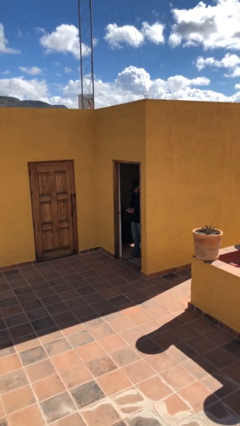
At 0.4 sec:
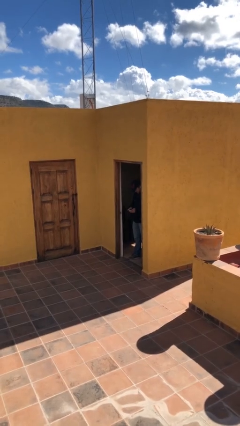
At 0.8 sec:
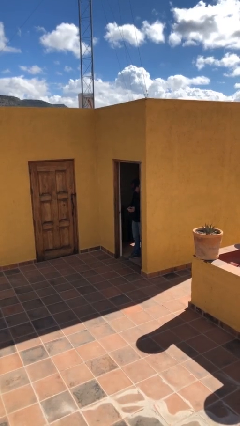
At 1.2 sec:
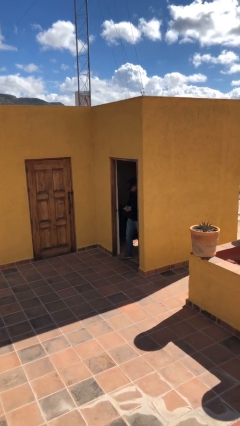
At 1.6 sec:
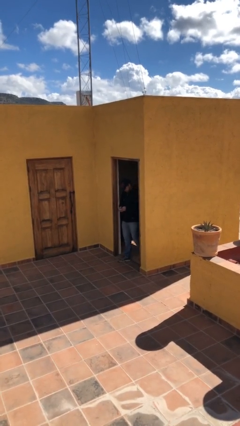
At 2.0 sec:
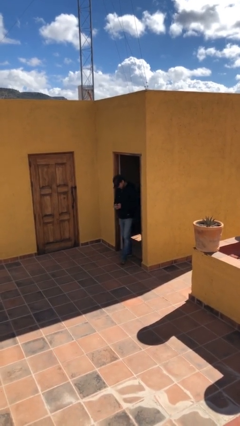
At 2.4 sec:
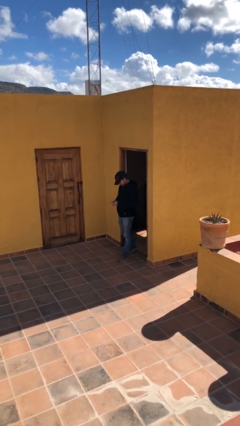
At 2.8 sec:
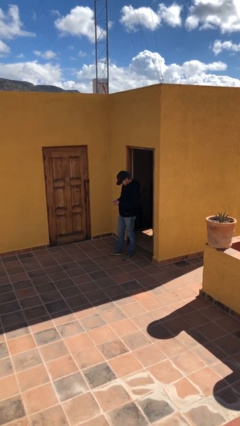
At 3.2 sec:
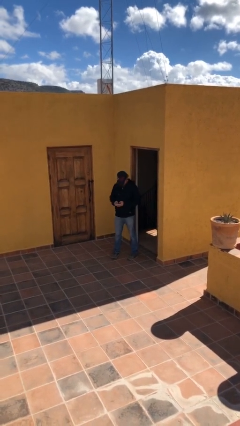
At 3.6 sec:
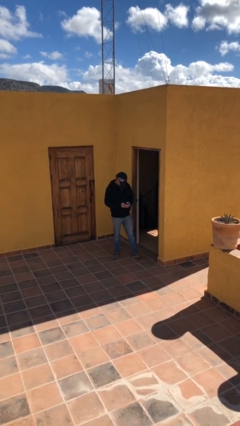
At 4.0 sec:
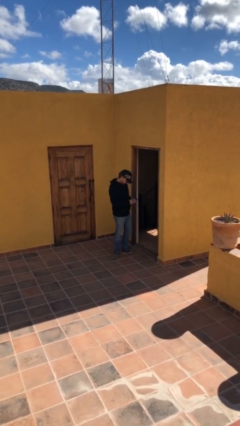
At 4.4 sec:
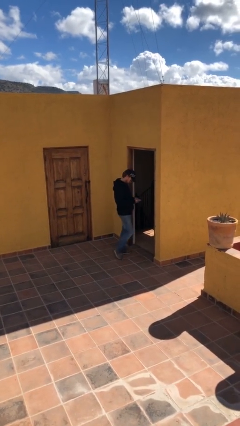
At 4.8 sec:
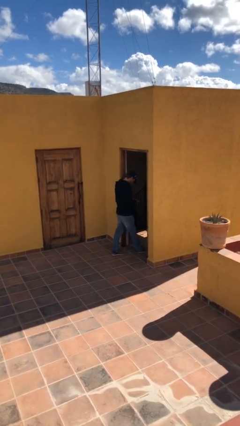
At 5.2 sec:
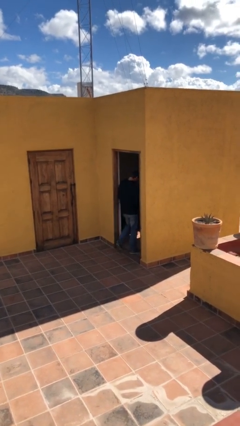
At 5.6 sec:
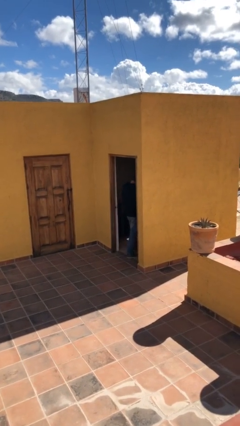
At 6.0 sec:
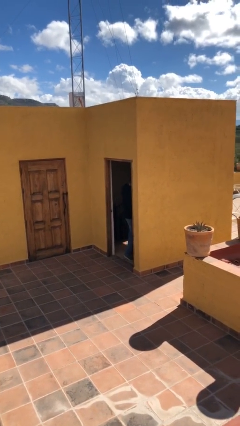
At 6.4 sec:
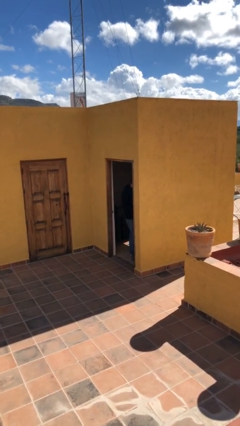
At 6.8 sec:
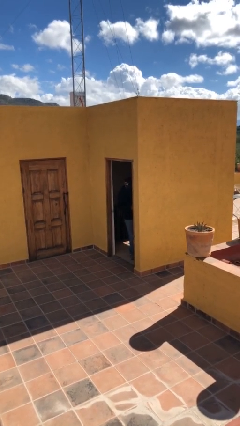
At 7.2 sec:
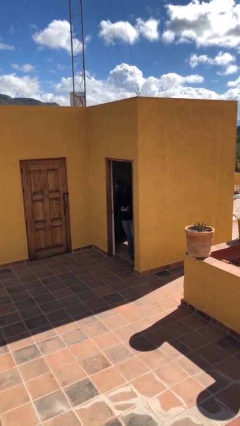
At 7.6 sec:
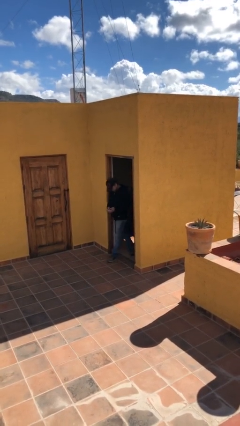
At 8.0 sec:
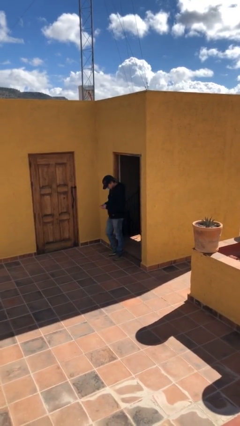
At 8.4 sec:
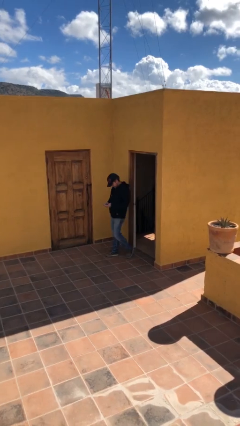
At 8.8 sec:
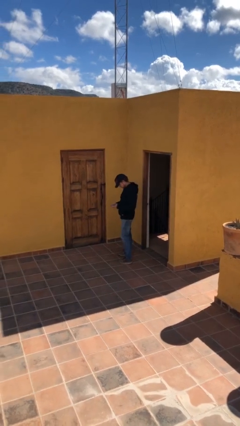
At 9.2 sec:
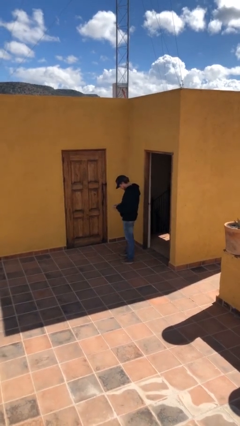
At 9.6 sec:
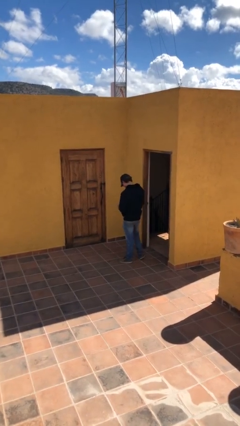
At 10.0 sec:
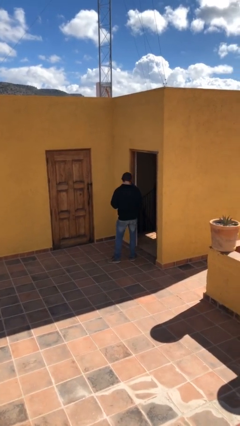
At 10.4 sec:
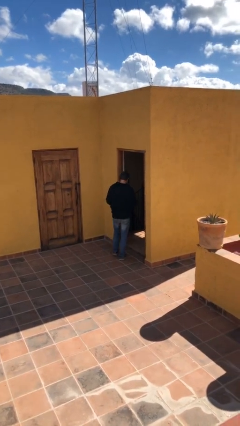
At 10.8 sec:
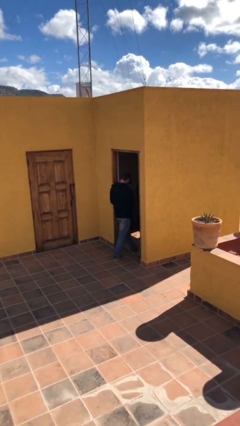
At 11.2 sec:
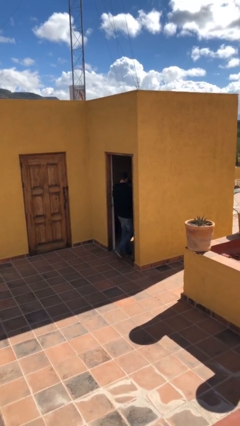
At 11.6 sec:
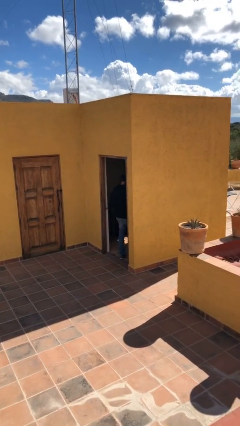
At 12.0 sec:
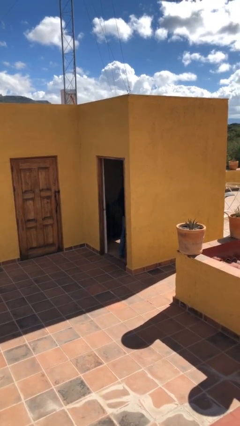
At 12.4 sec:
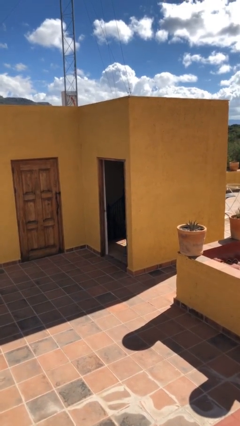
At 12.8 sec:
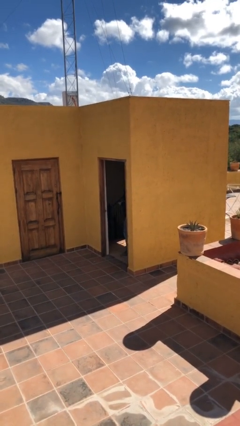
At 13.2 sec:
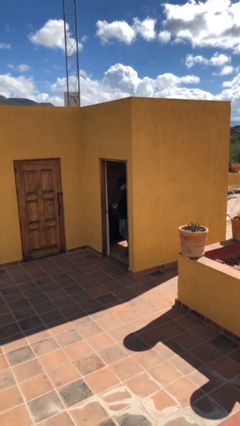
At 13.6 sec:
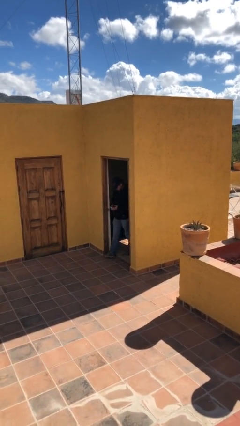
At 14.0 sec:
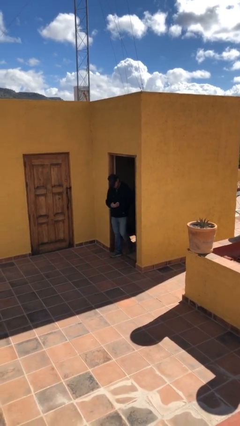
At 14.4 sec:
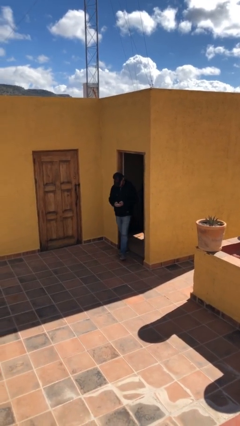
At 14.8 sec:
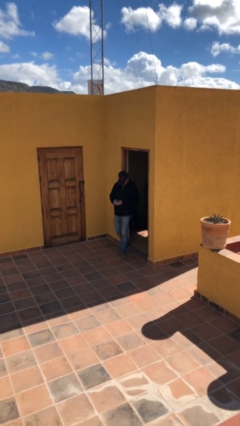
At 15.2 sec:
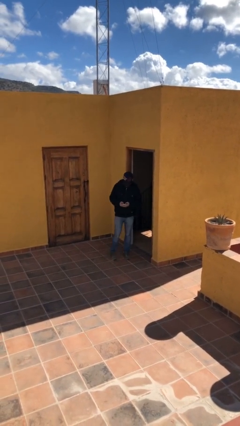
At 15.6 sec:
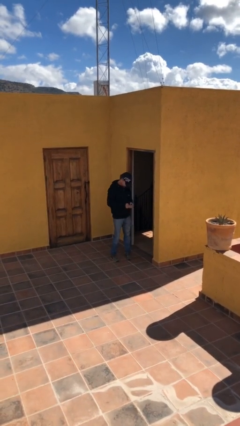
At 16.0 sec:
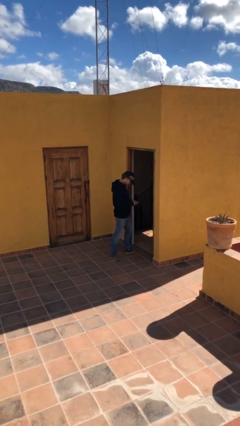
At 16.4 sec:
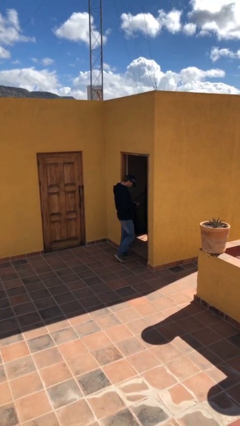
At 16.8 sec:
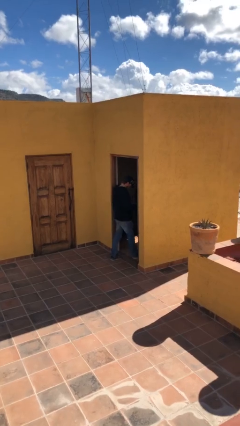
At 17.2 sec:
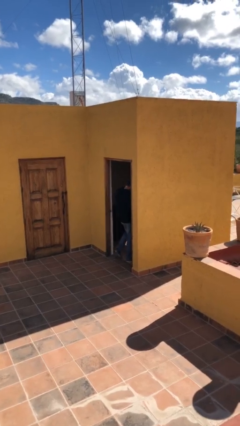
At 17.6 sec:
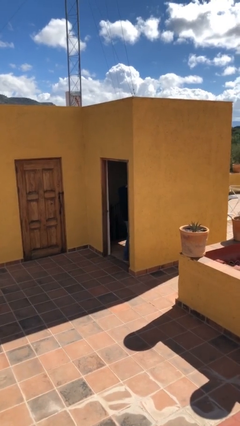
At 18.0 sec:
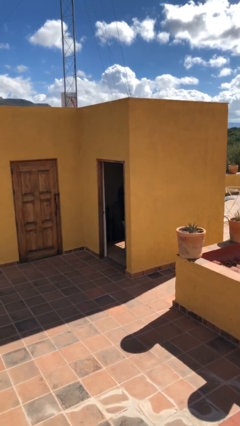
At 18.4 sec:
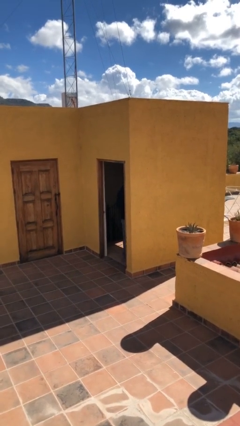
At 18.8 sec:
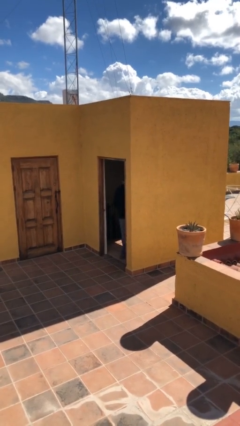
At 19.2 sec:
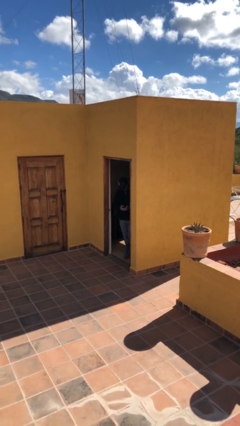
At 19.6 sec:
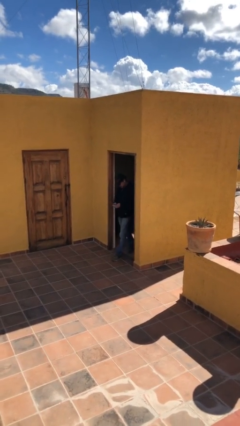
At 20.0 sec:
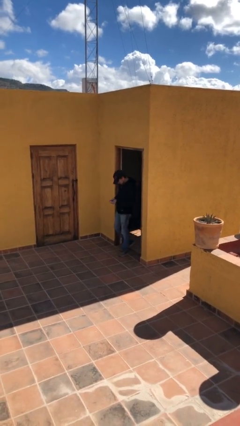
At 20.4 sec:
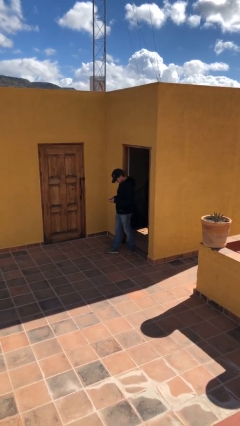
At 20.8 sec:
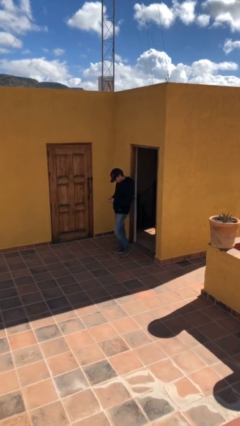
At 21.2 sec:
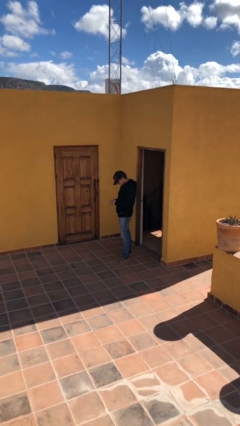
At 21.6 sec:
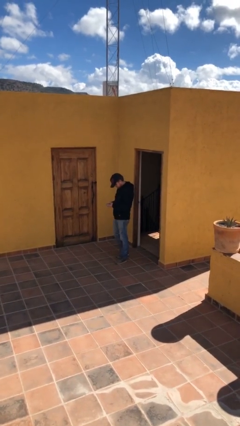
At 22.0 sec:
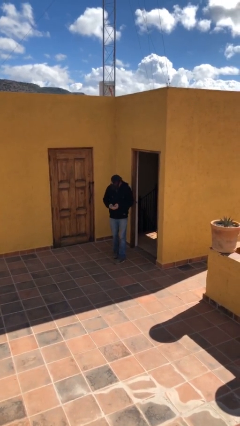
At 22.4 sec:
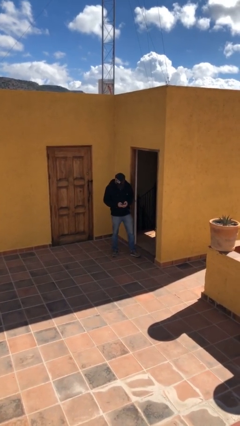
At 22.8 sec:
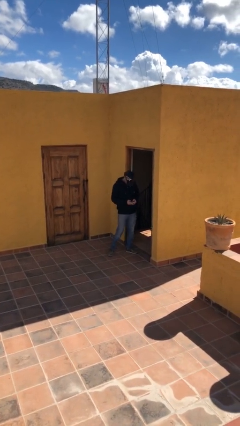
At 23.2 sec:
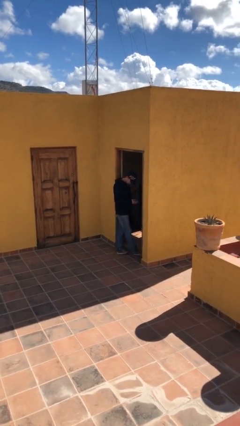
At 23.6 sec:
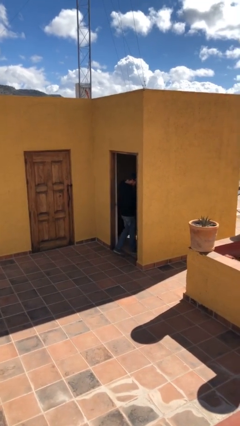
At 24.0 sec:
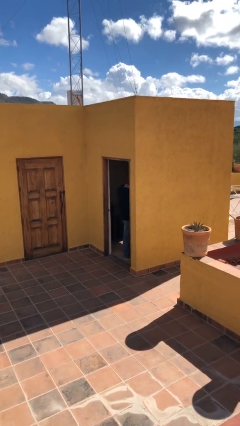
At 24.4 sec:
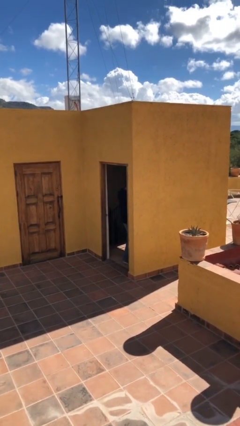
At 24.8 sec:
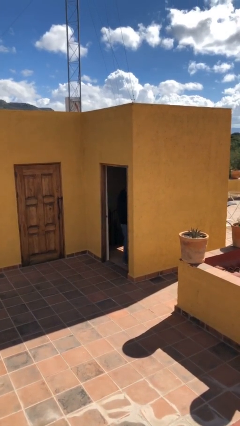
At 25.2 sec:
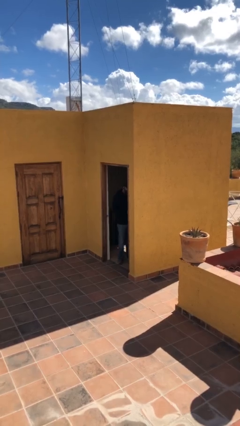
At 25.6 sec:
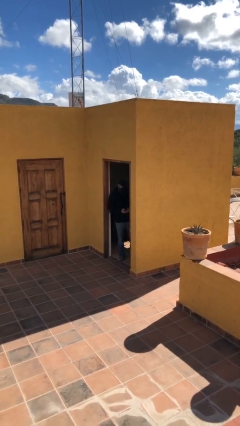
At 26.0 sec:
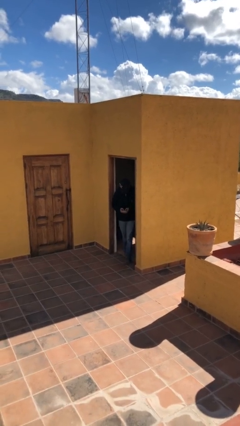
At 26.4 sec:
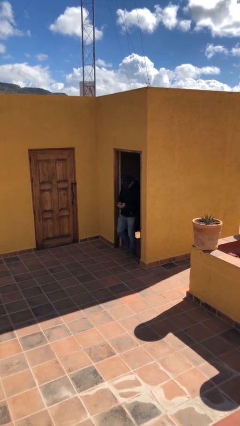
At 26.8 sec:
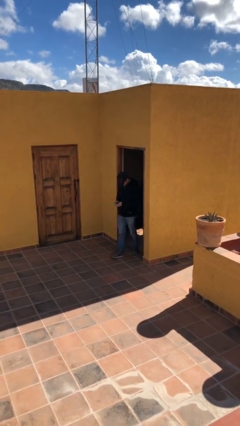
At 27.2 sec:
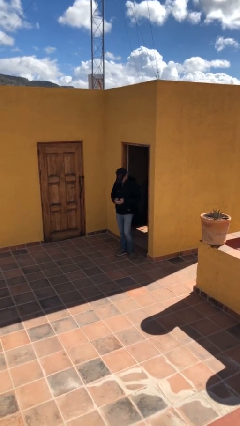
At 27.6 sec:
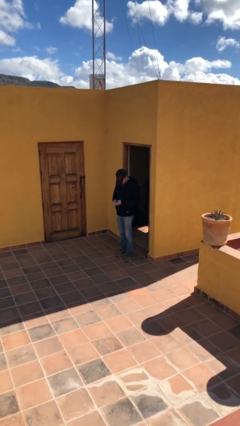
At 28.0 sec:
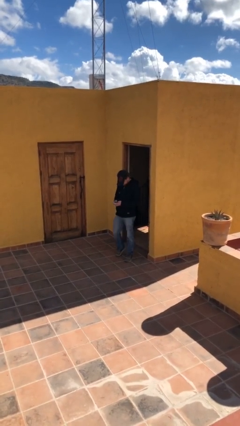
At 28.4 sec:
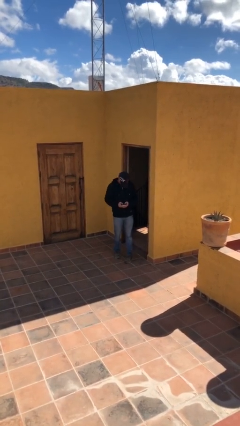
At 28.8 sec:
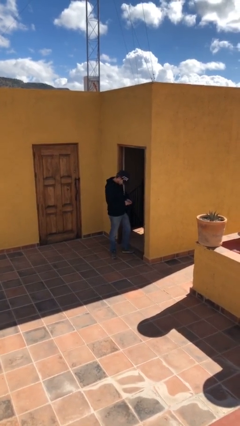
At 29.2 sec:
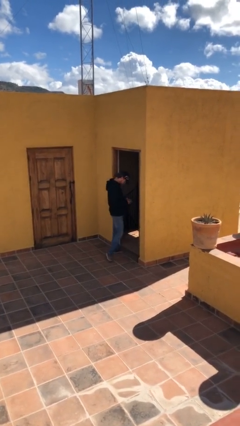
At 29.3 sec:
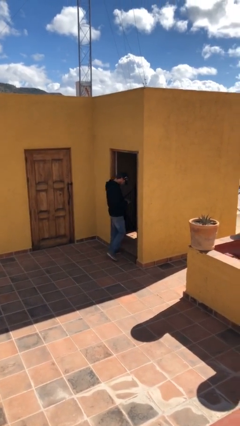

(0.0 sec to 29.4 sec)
person texts on phone

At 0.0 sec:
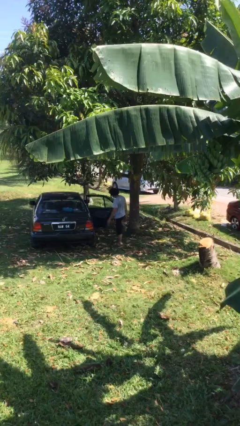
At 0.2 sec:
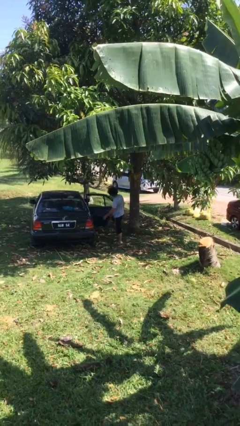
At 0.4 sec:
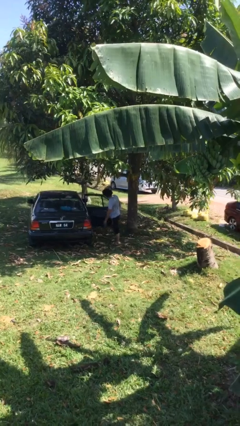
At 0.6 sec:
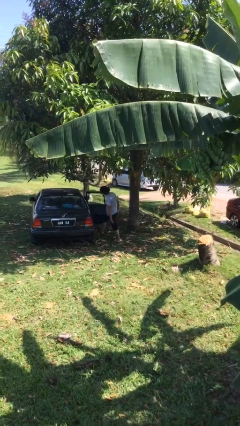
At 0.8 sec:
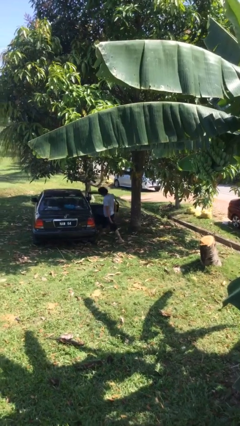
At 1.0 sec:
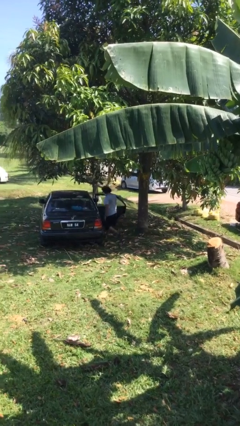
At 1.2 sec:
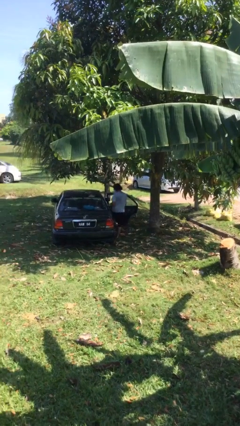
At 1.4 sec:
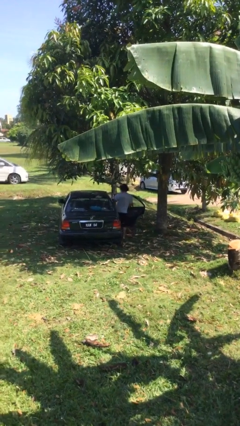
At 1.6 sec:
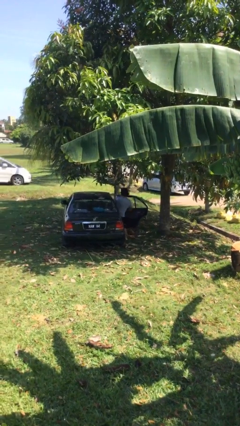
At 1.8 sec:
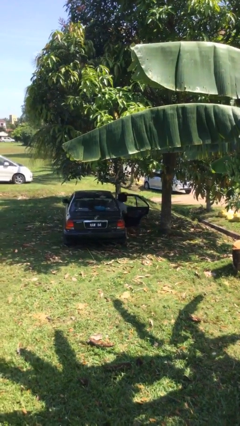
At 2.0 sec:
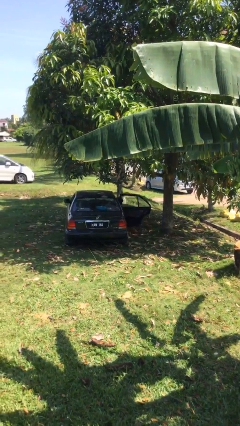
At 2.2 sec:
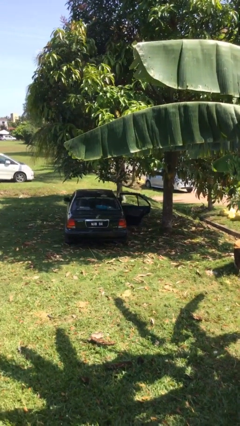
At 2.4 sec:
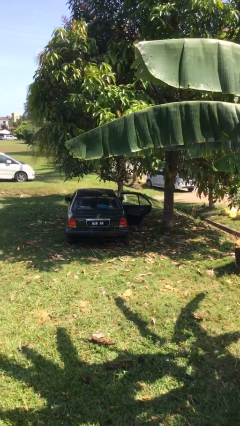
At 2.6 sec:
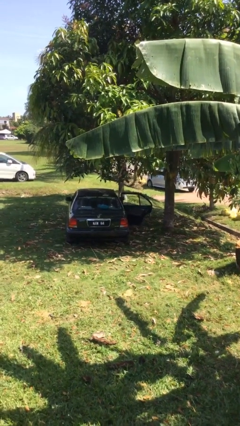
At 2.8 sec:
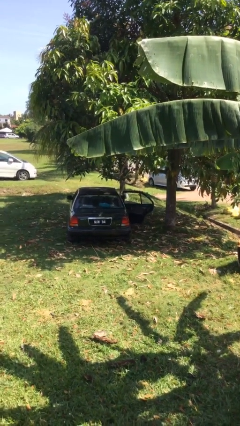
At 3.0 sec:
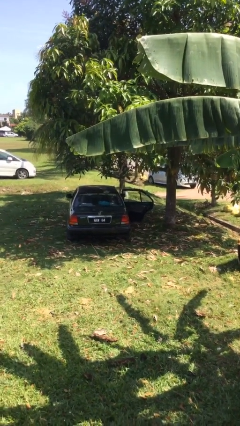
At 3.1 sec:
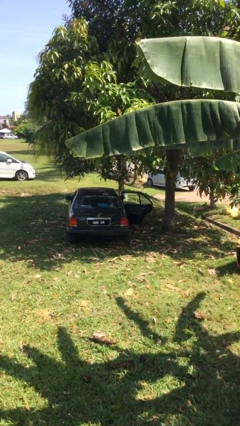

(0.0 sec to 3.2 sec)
person enters car
